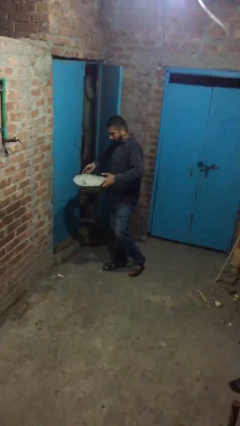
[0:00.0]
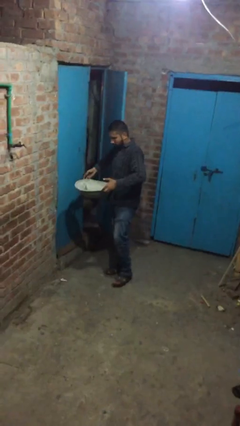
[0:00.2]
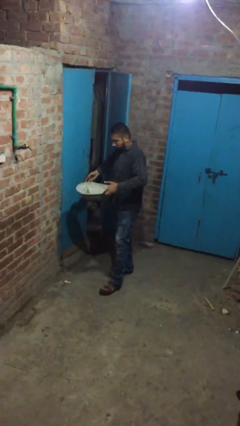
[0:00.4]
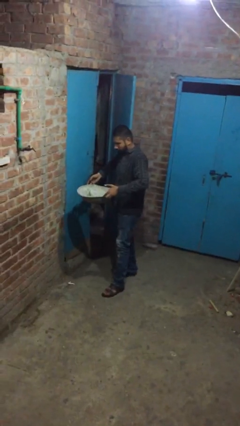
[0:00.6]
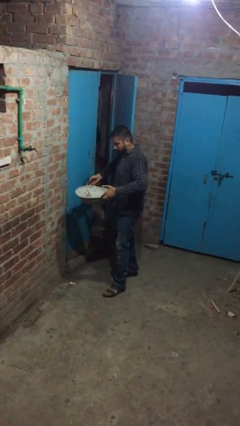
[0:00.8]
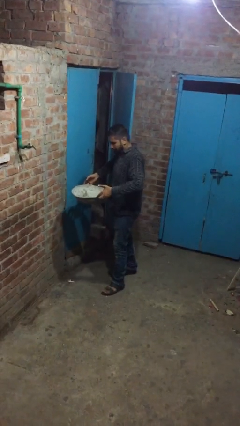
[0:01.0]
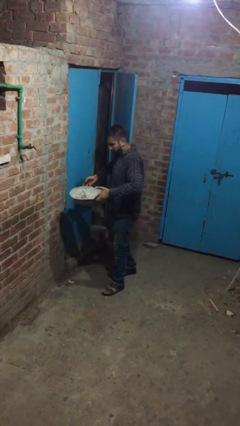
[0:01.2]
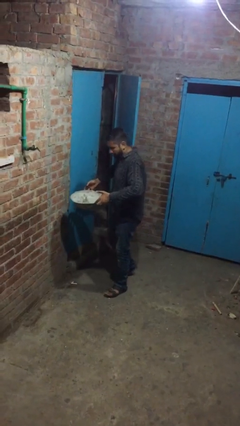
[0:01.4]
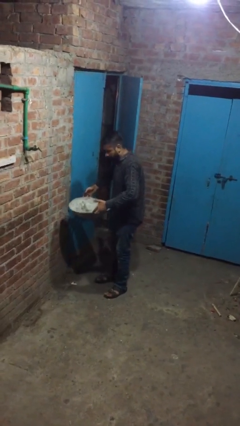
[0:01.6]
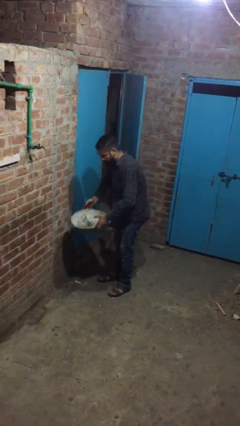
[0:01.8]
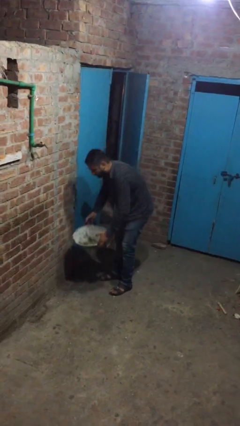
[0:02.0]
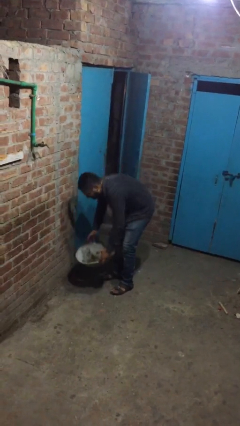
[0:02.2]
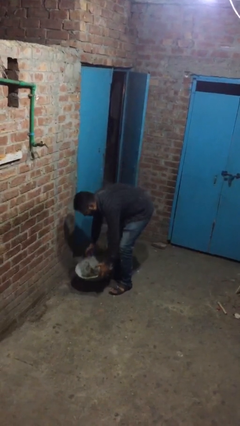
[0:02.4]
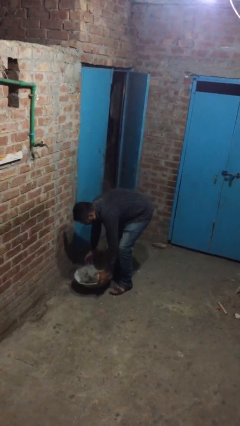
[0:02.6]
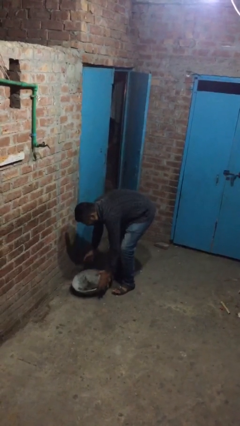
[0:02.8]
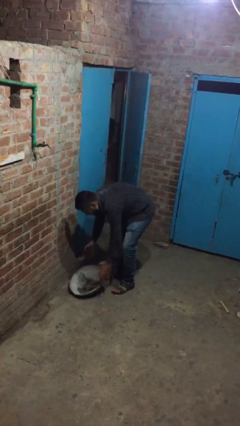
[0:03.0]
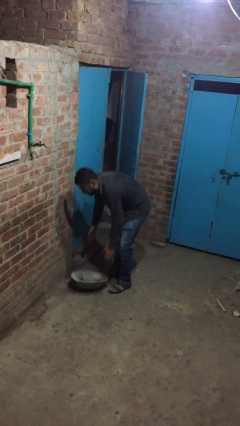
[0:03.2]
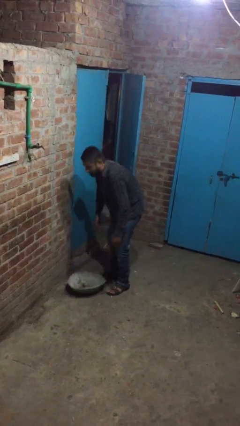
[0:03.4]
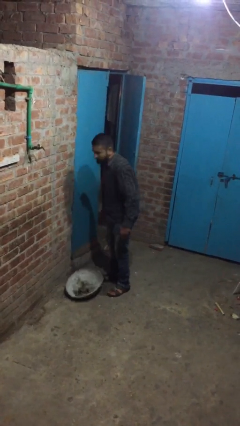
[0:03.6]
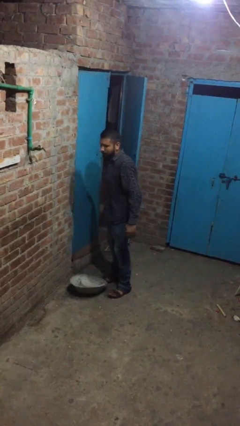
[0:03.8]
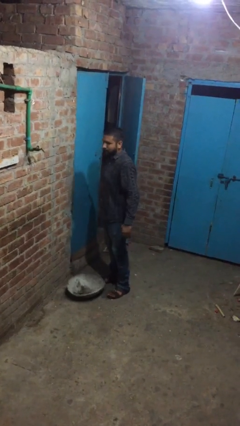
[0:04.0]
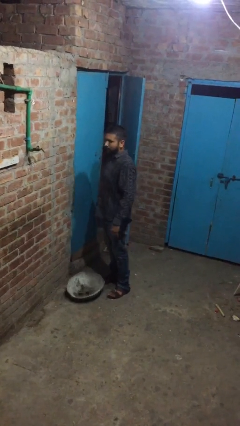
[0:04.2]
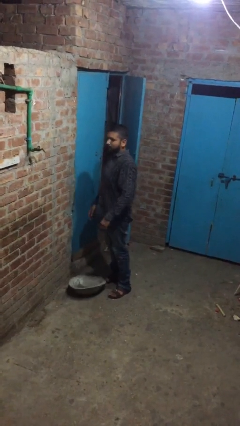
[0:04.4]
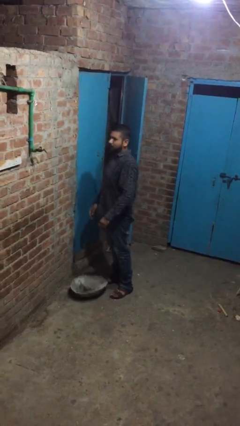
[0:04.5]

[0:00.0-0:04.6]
person puts down object on floor

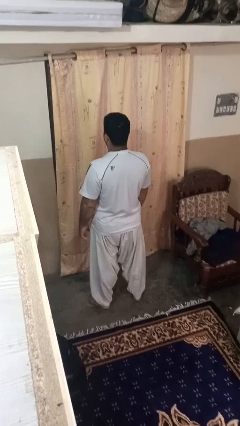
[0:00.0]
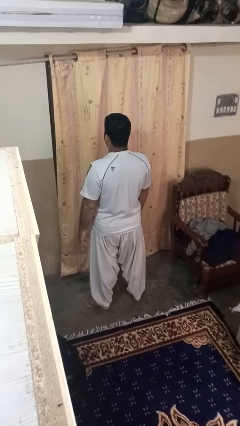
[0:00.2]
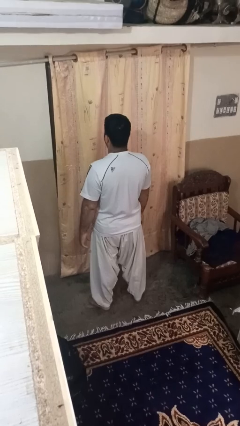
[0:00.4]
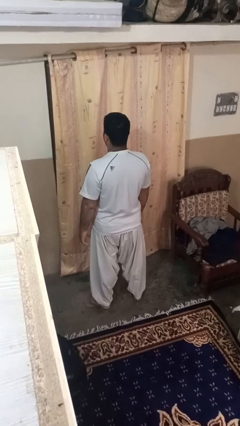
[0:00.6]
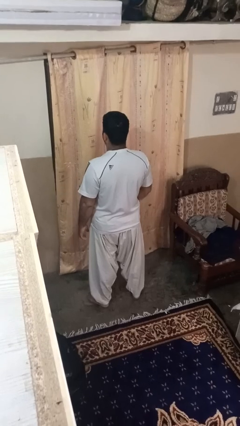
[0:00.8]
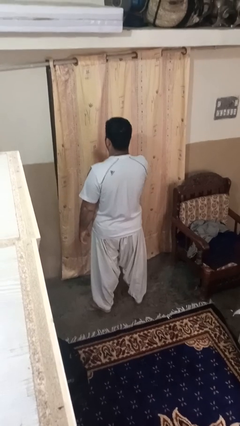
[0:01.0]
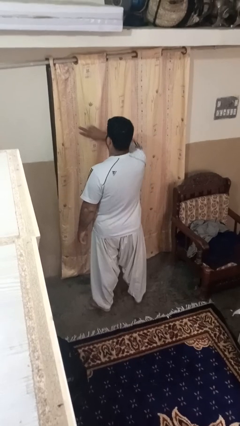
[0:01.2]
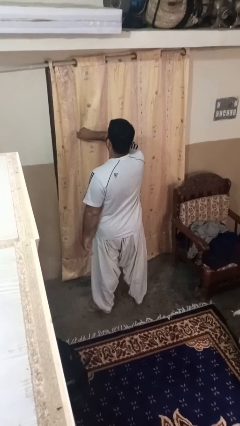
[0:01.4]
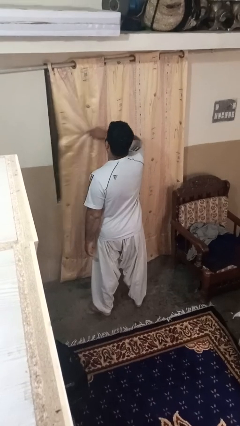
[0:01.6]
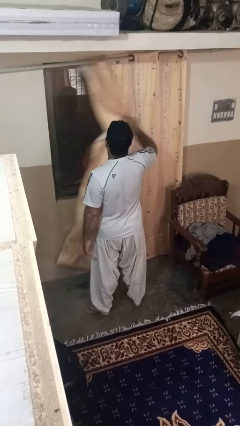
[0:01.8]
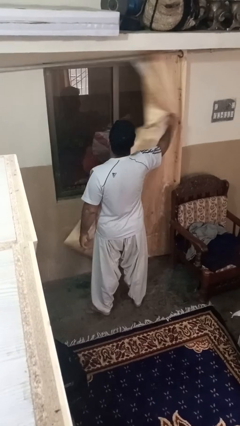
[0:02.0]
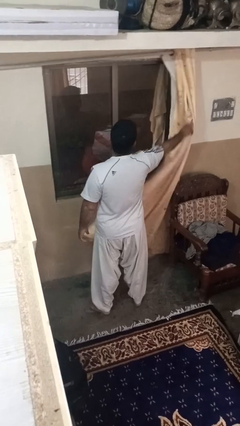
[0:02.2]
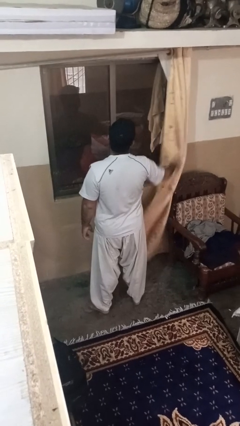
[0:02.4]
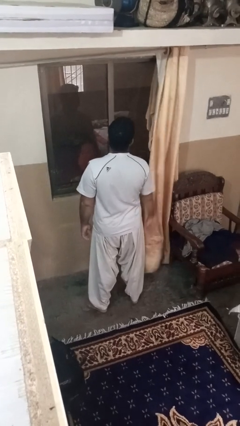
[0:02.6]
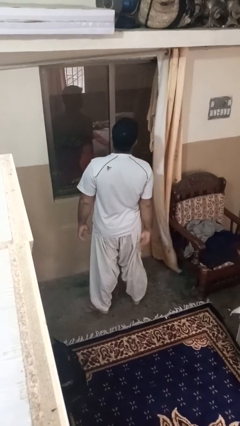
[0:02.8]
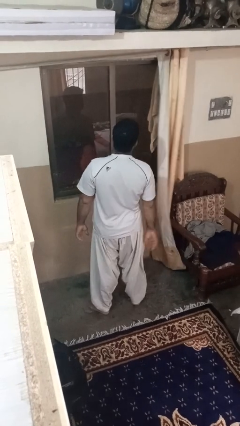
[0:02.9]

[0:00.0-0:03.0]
person opens curtains

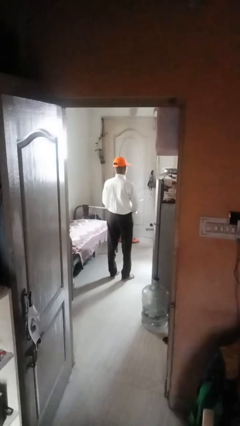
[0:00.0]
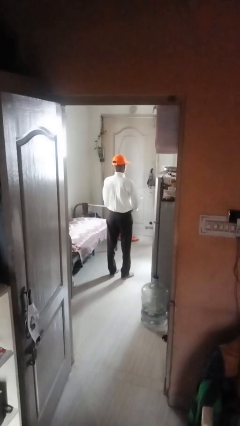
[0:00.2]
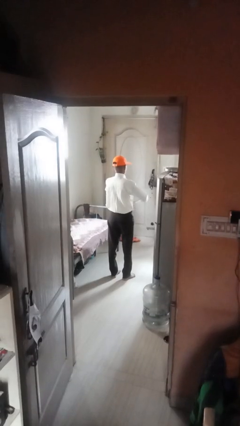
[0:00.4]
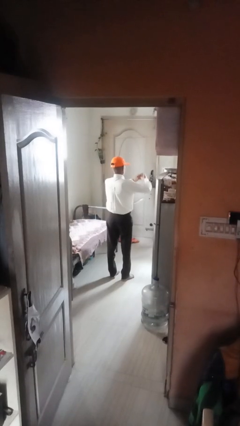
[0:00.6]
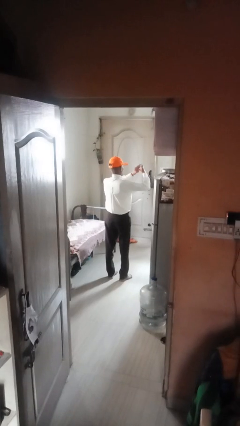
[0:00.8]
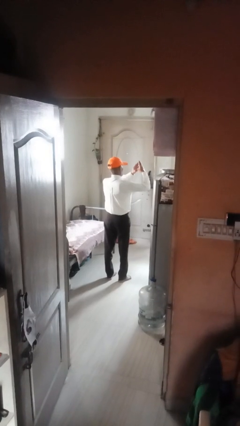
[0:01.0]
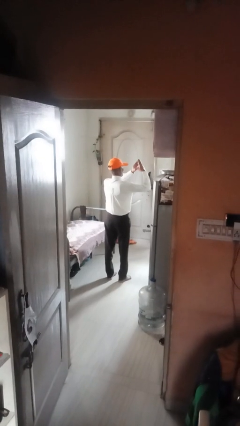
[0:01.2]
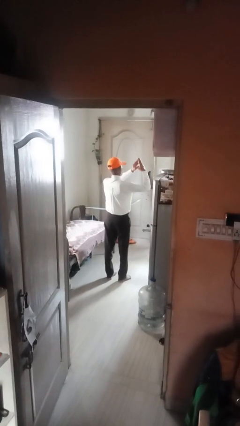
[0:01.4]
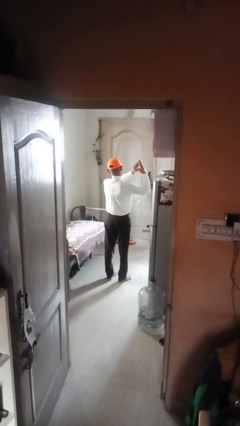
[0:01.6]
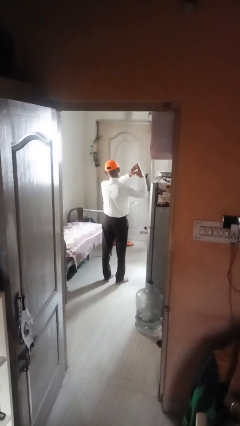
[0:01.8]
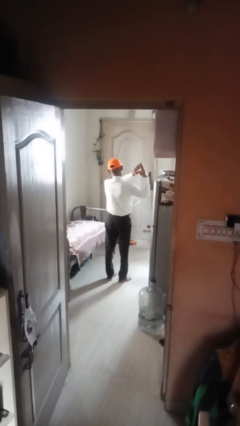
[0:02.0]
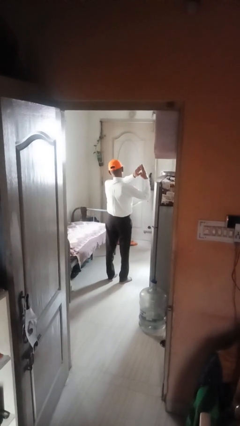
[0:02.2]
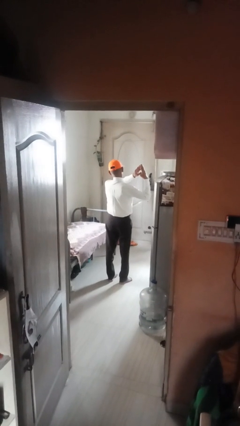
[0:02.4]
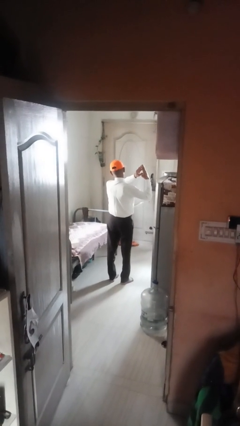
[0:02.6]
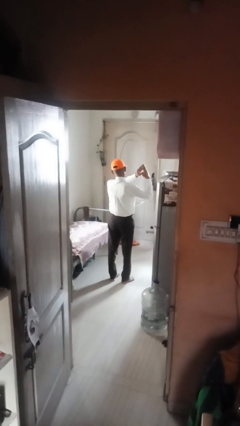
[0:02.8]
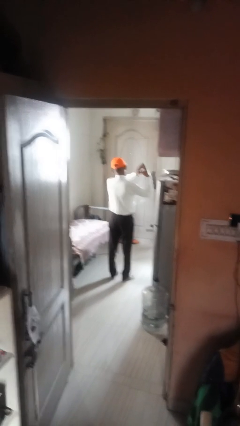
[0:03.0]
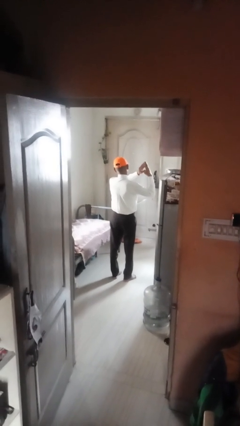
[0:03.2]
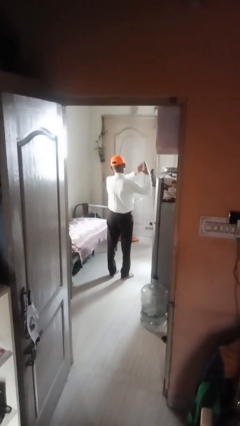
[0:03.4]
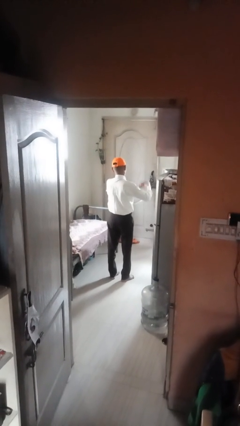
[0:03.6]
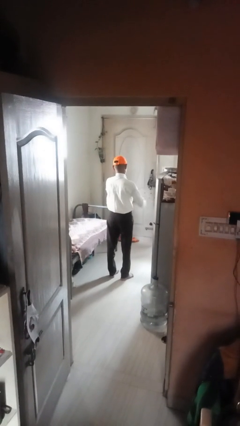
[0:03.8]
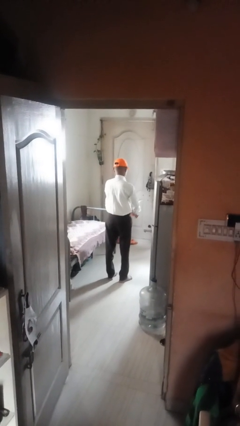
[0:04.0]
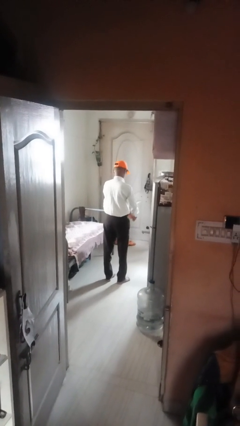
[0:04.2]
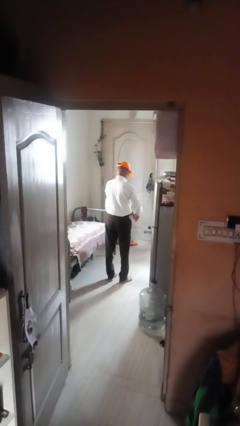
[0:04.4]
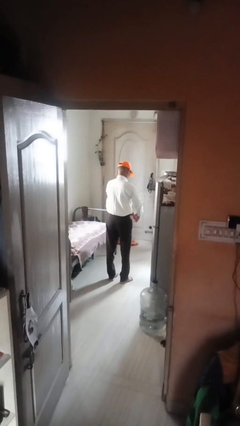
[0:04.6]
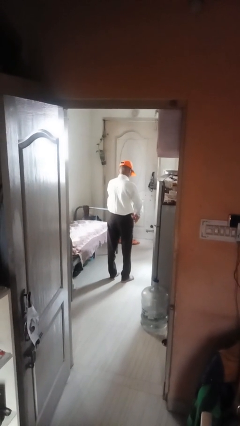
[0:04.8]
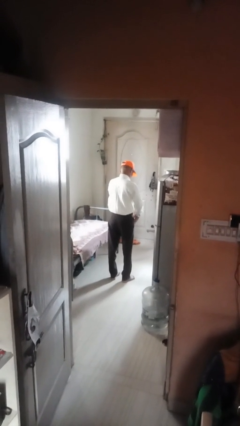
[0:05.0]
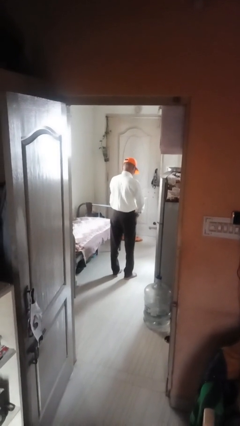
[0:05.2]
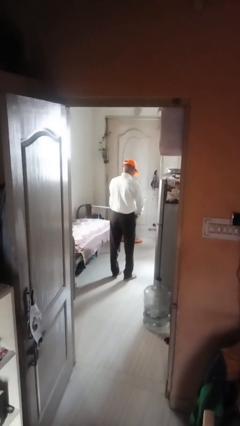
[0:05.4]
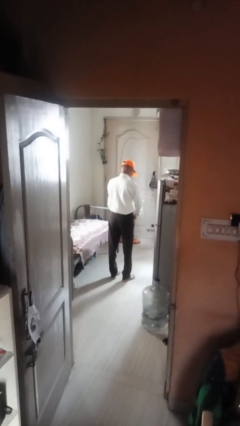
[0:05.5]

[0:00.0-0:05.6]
person gestures heart

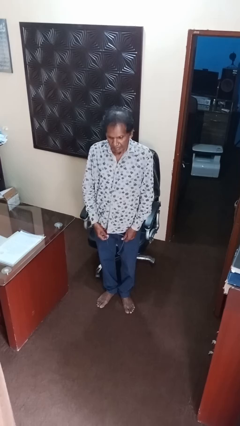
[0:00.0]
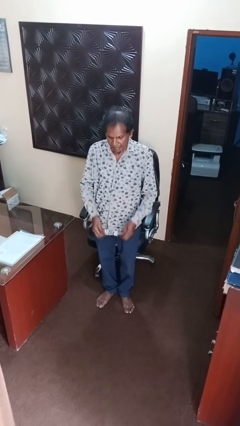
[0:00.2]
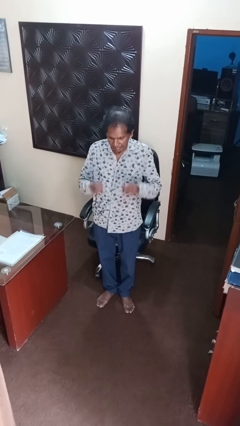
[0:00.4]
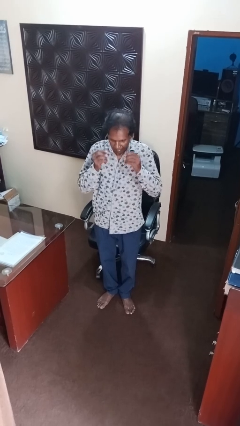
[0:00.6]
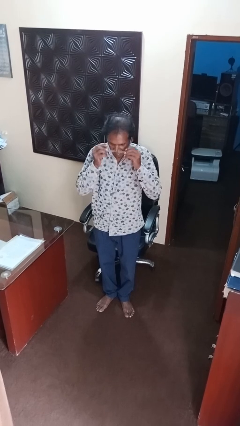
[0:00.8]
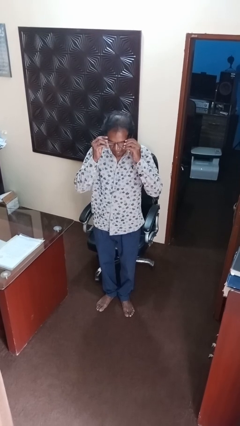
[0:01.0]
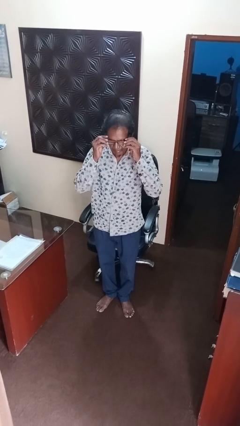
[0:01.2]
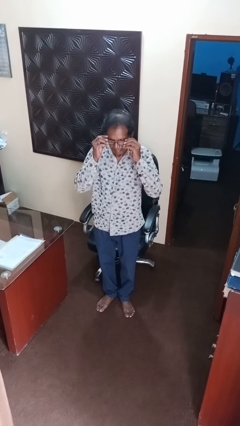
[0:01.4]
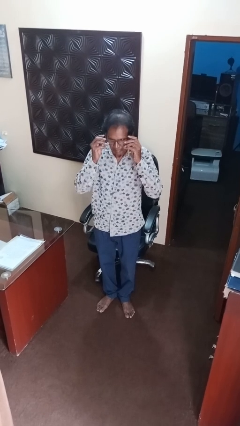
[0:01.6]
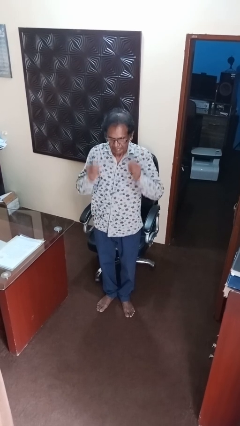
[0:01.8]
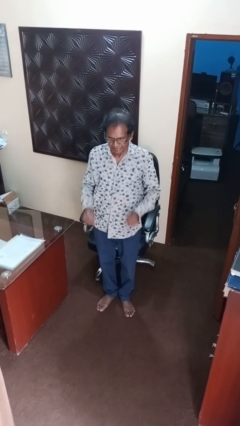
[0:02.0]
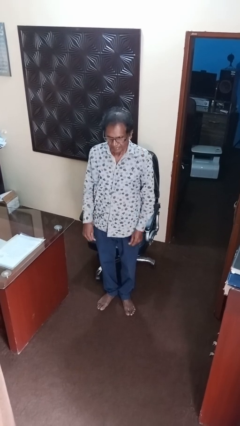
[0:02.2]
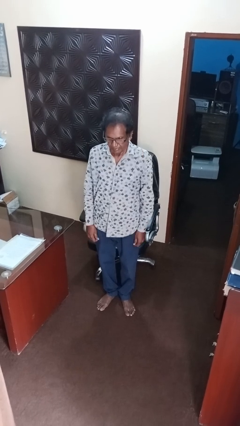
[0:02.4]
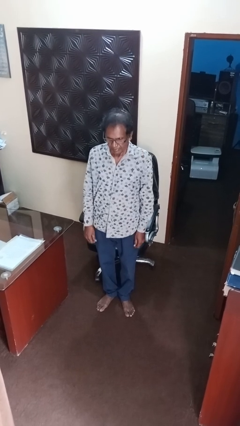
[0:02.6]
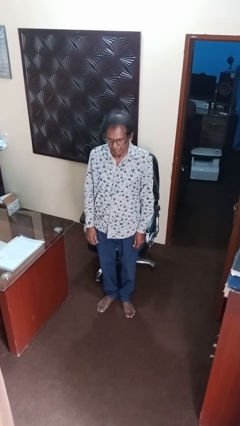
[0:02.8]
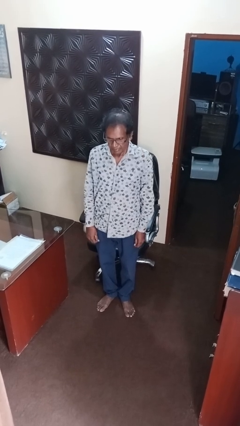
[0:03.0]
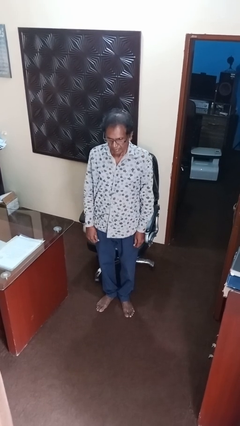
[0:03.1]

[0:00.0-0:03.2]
person puts on glasses

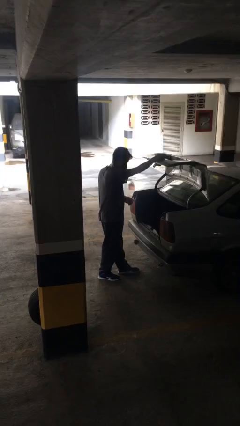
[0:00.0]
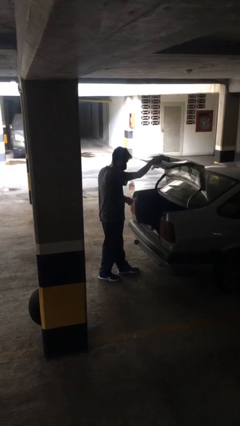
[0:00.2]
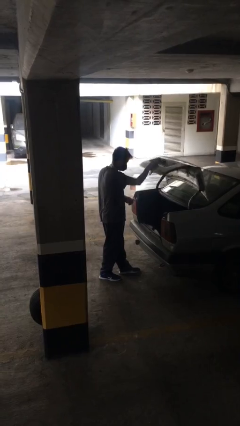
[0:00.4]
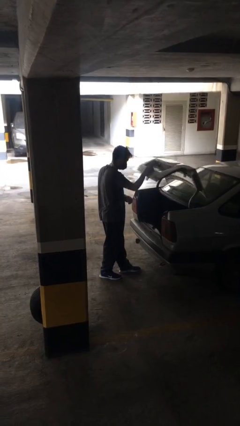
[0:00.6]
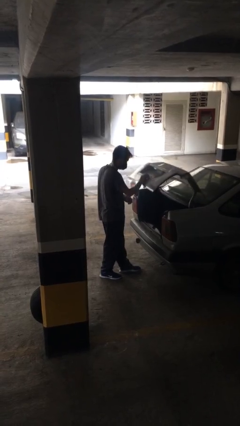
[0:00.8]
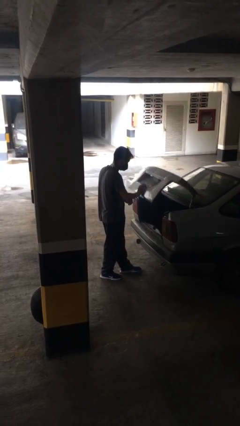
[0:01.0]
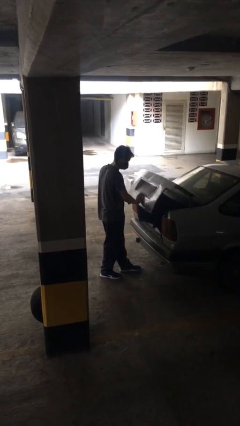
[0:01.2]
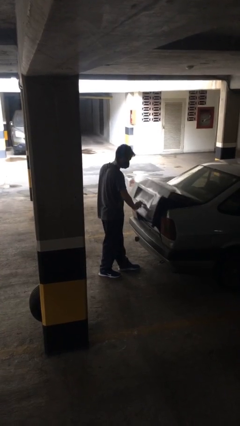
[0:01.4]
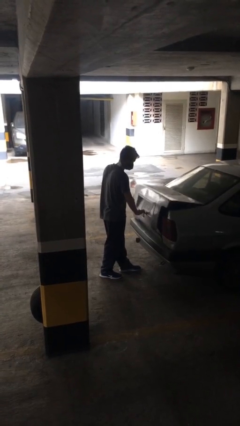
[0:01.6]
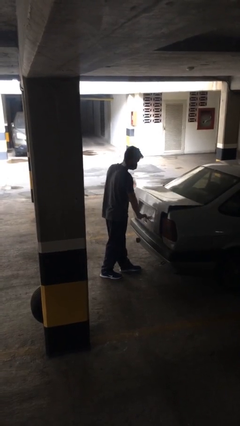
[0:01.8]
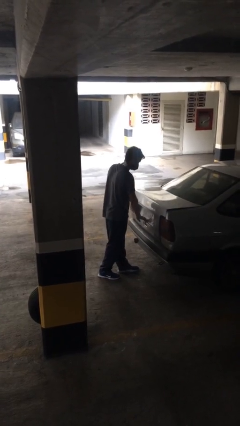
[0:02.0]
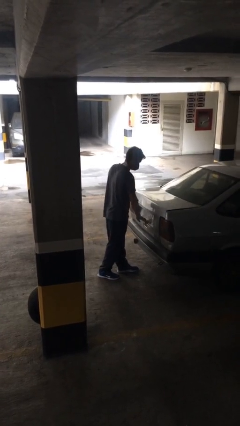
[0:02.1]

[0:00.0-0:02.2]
person closes car trunk
